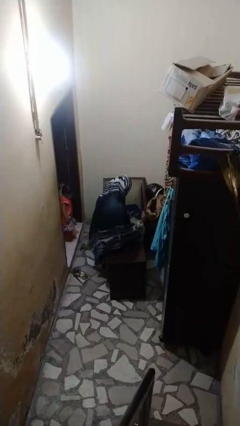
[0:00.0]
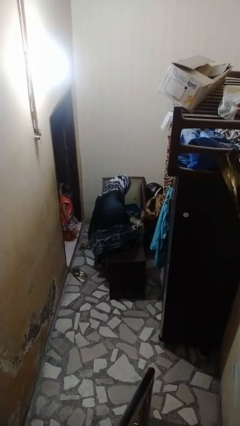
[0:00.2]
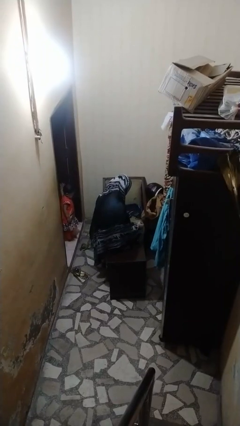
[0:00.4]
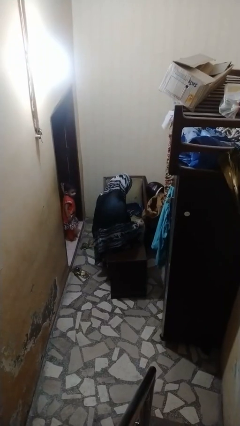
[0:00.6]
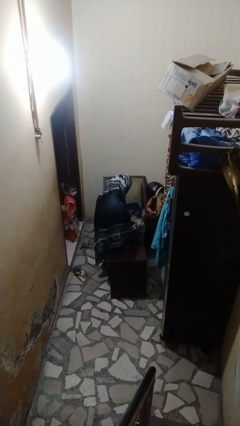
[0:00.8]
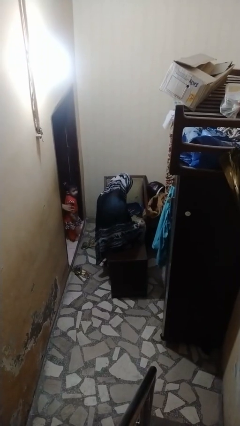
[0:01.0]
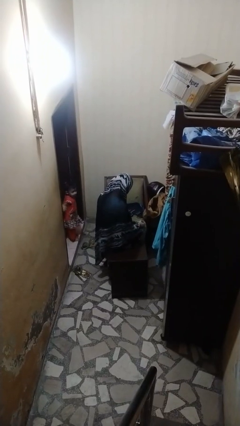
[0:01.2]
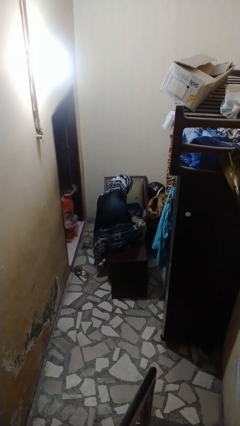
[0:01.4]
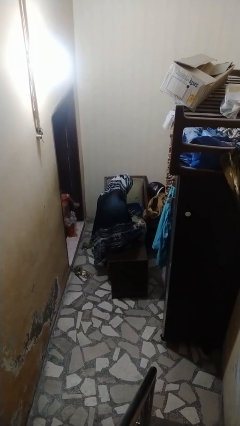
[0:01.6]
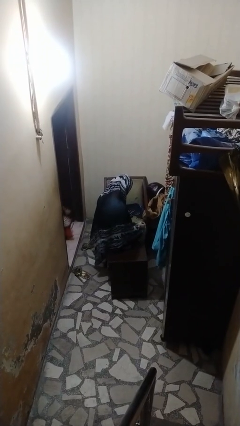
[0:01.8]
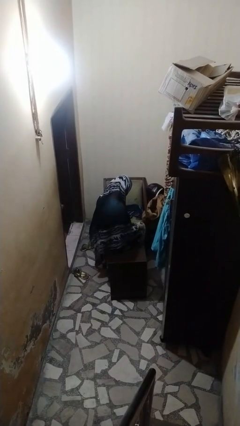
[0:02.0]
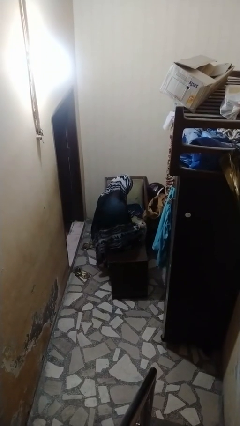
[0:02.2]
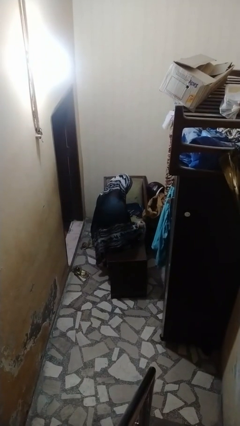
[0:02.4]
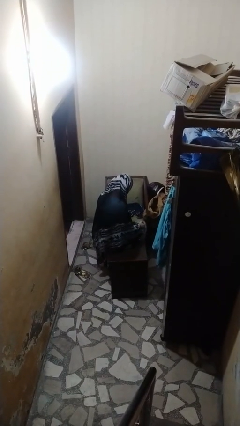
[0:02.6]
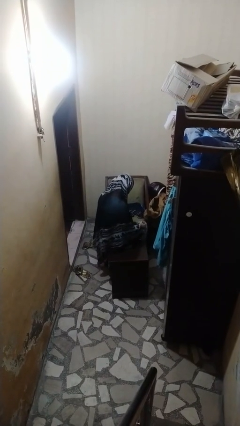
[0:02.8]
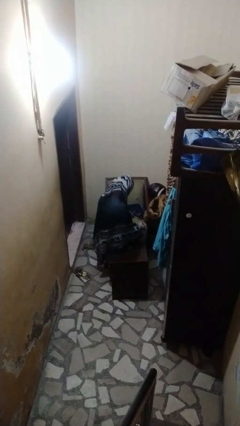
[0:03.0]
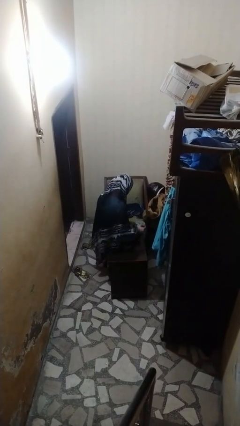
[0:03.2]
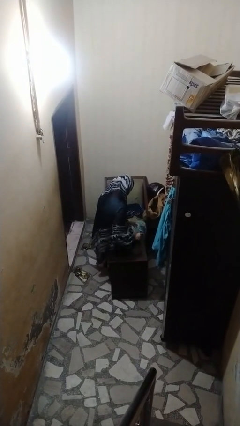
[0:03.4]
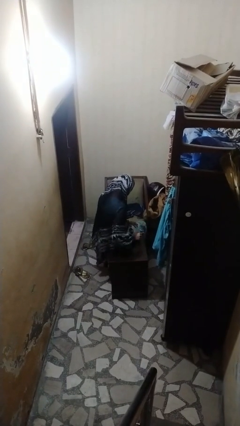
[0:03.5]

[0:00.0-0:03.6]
person paints fingernails

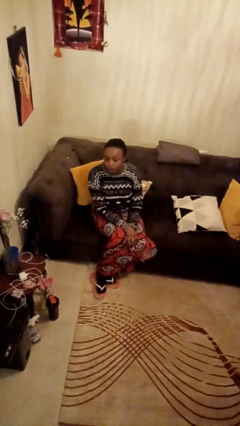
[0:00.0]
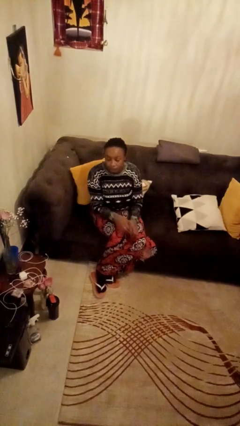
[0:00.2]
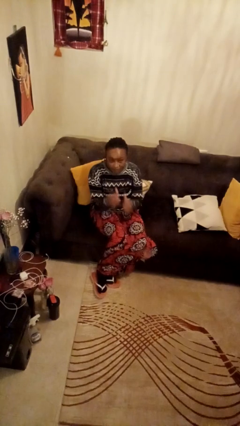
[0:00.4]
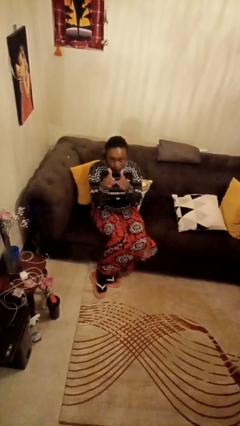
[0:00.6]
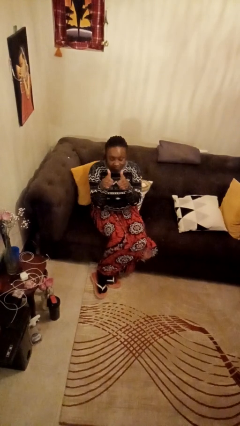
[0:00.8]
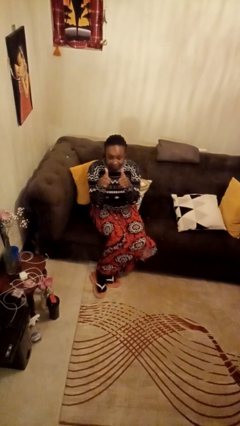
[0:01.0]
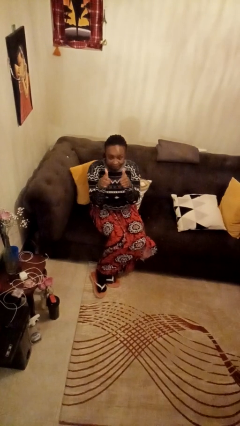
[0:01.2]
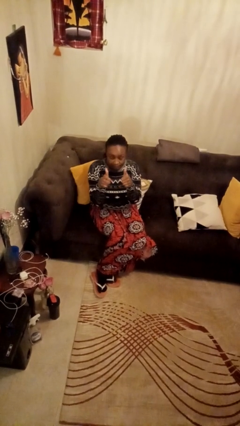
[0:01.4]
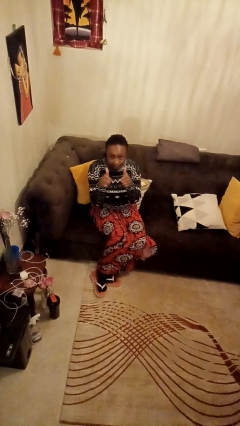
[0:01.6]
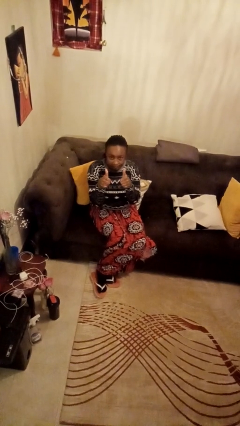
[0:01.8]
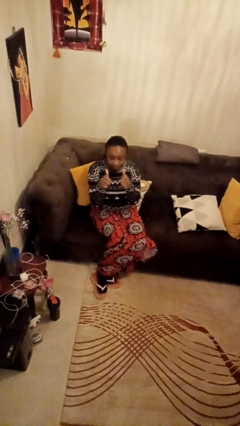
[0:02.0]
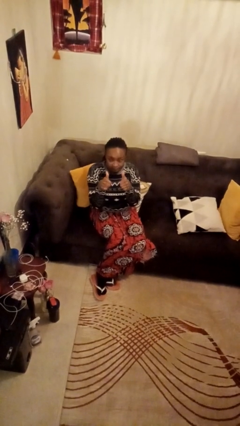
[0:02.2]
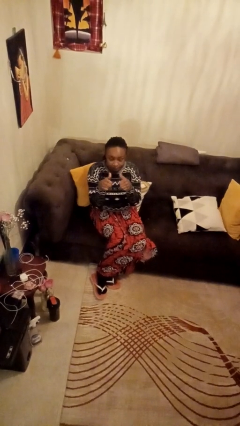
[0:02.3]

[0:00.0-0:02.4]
person gestures thumbs up

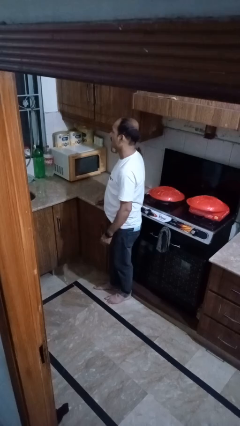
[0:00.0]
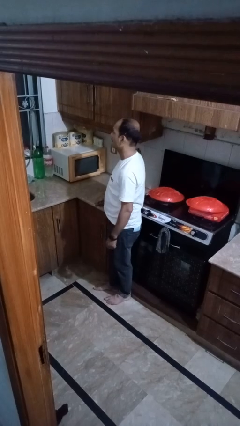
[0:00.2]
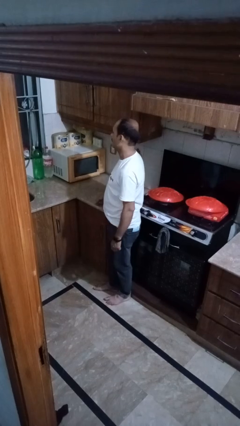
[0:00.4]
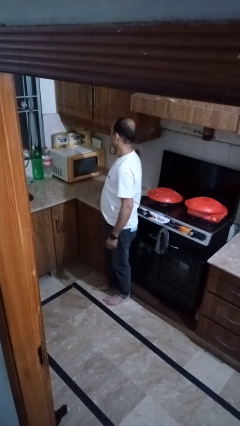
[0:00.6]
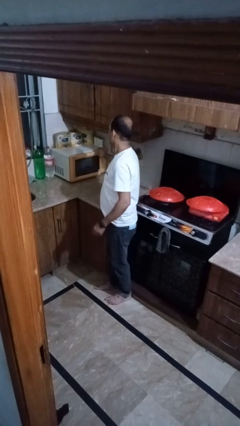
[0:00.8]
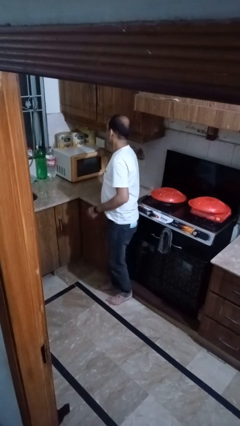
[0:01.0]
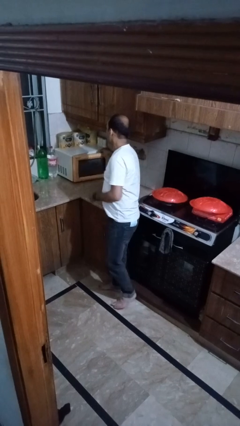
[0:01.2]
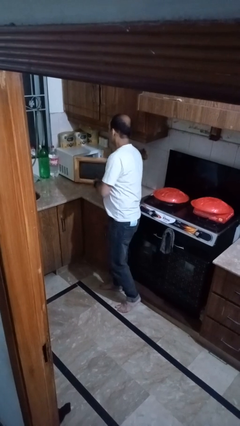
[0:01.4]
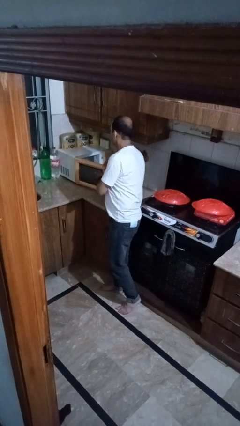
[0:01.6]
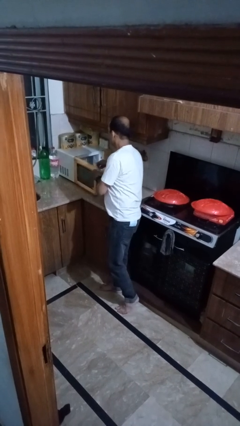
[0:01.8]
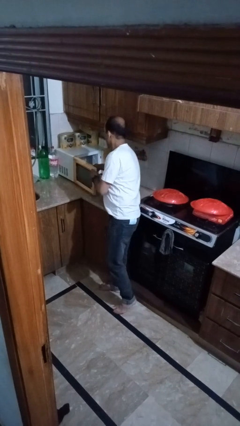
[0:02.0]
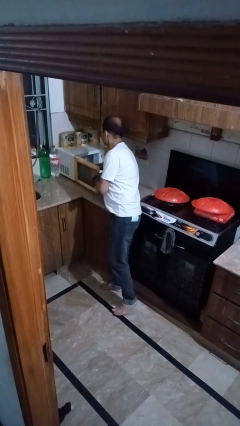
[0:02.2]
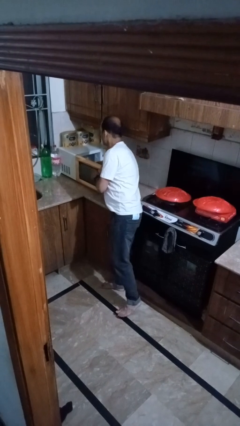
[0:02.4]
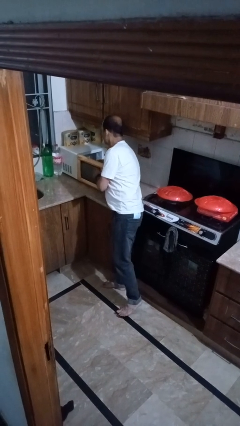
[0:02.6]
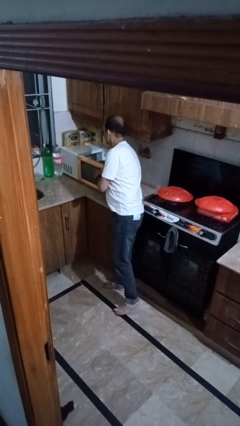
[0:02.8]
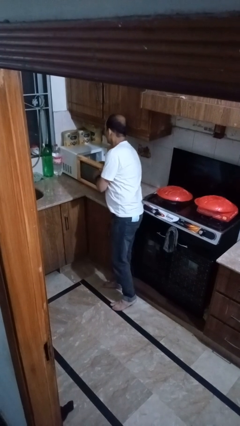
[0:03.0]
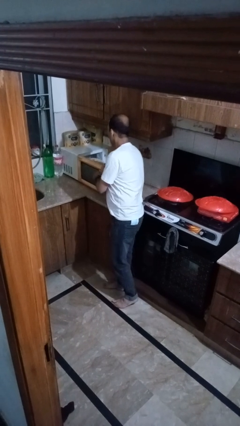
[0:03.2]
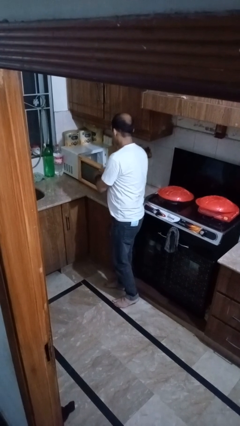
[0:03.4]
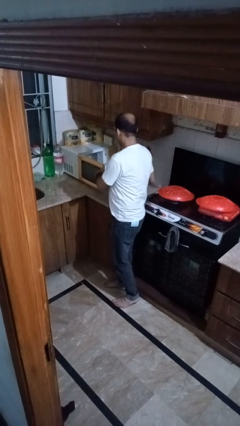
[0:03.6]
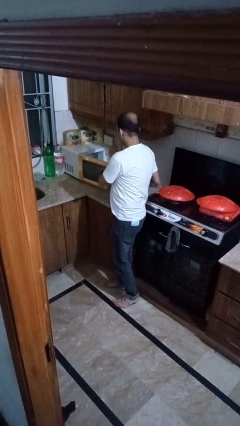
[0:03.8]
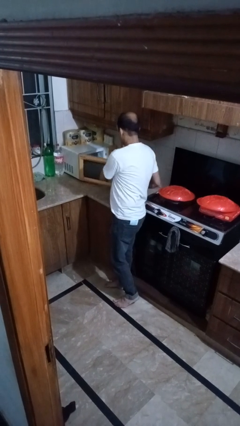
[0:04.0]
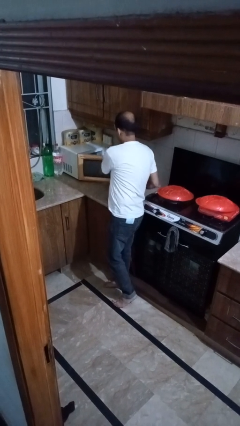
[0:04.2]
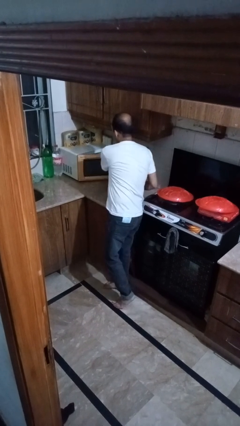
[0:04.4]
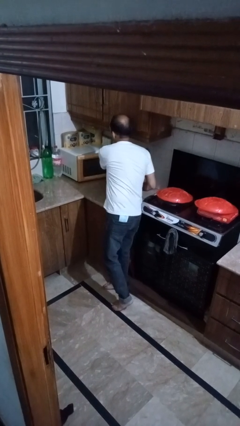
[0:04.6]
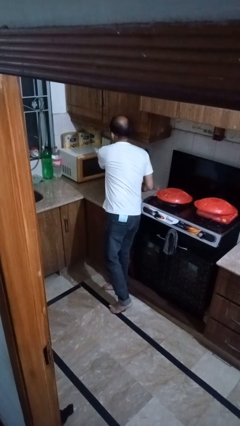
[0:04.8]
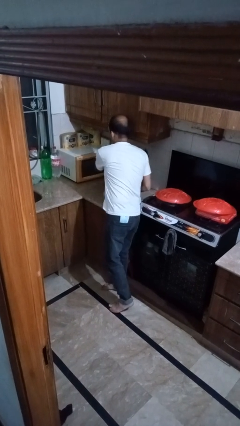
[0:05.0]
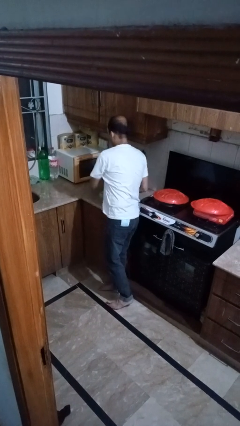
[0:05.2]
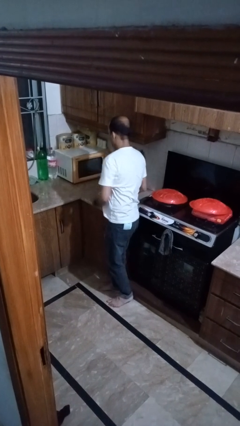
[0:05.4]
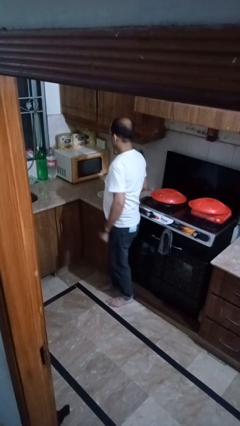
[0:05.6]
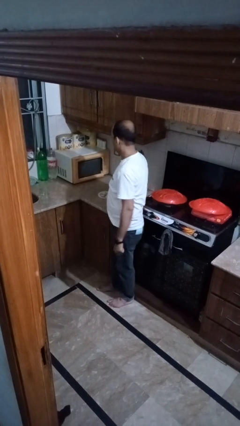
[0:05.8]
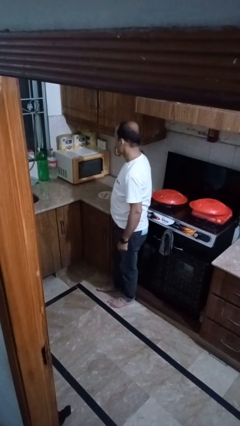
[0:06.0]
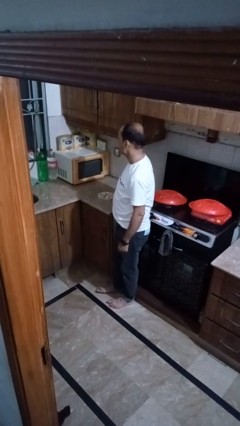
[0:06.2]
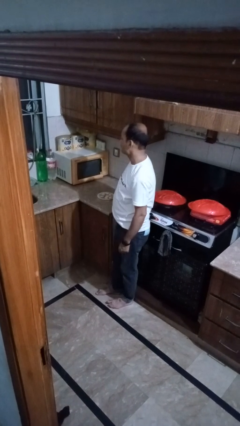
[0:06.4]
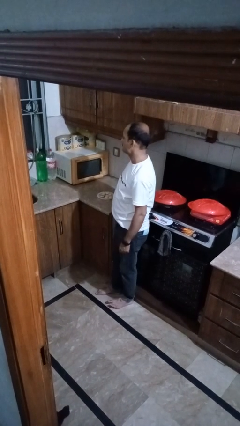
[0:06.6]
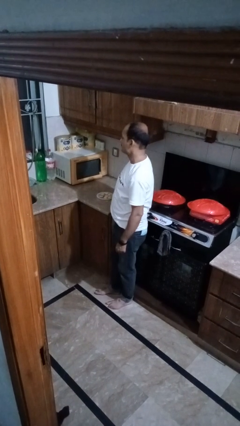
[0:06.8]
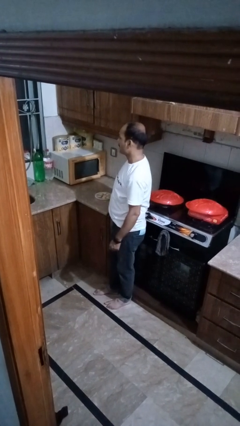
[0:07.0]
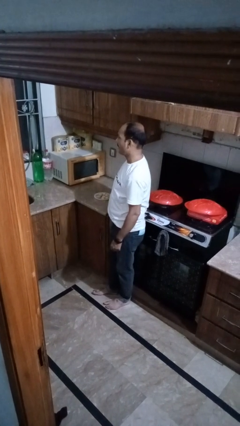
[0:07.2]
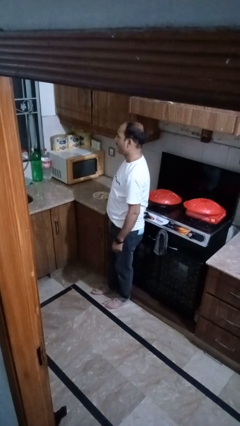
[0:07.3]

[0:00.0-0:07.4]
person takes object from microwave

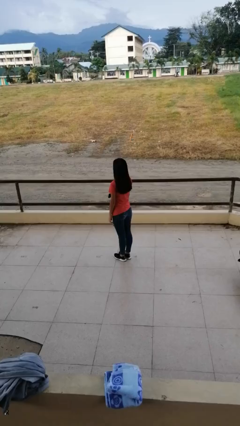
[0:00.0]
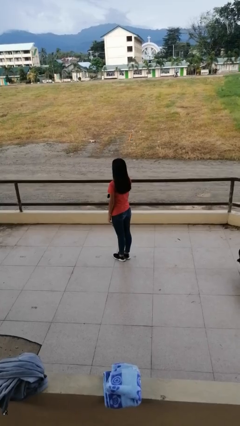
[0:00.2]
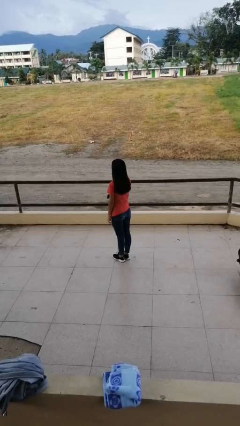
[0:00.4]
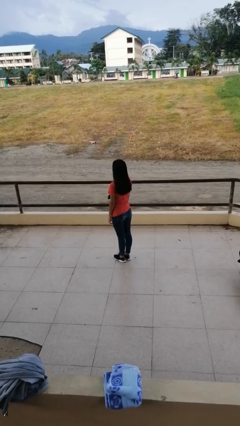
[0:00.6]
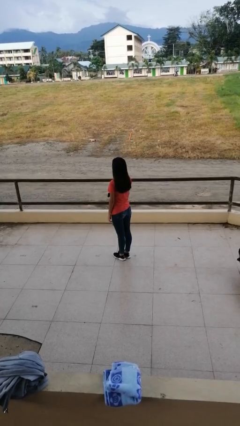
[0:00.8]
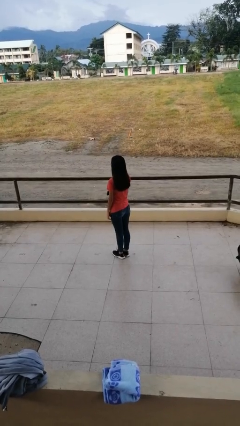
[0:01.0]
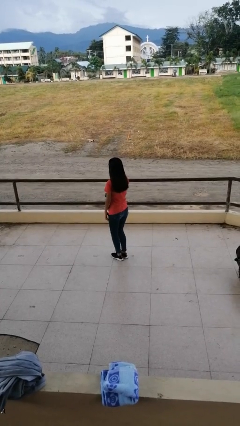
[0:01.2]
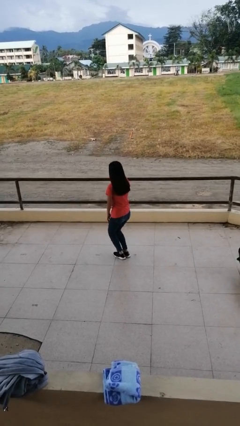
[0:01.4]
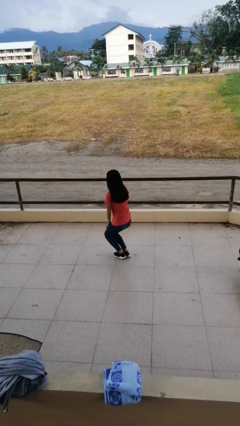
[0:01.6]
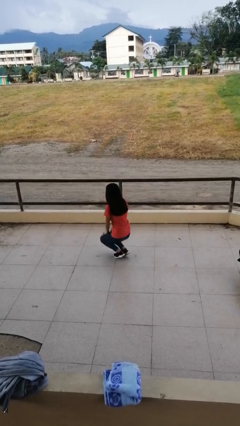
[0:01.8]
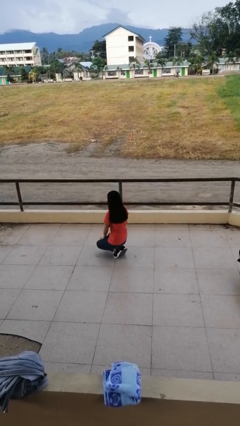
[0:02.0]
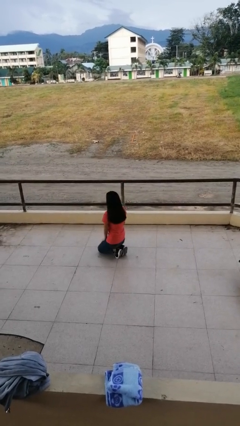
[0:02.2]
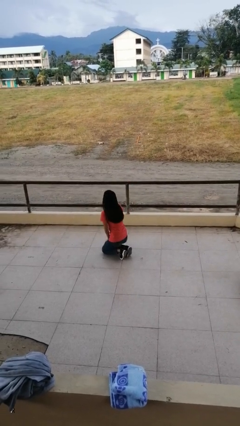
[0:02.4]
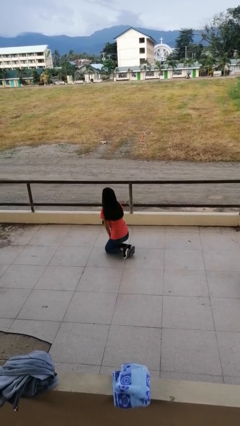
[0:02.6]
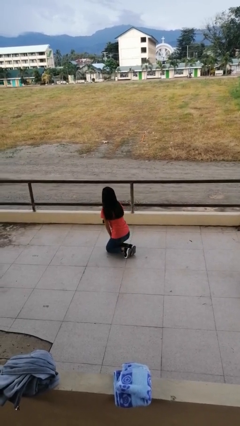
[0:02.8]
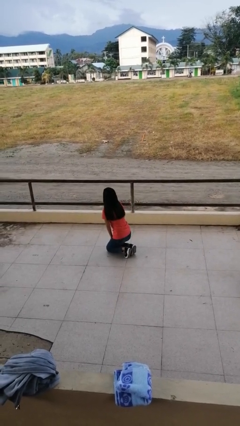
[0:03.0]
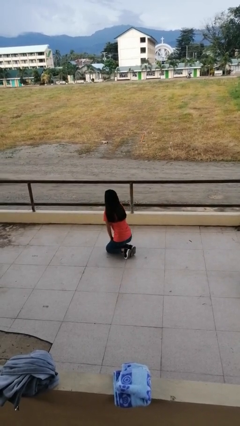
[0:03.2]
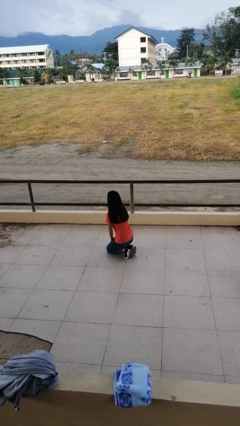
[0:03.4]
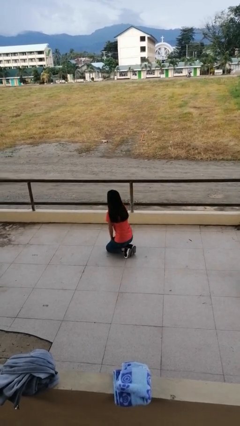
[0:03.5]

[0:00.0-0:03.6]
person kneels

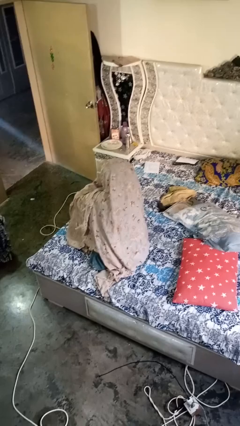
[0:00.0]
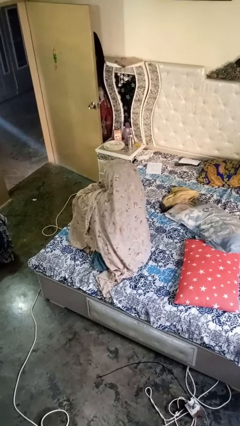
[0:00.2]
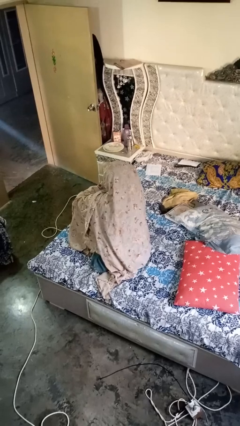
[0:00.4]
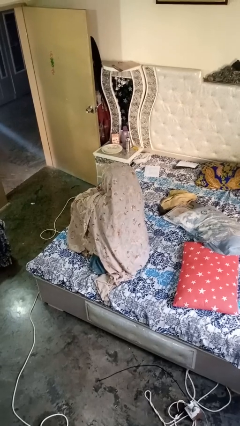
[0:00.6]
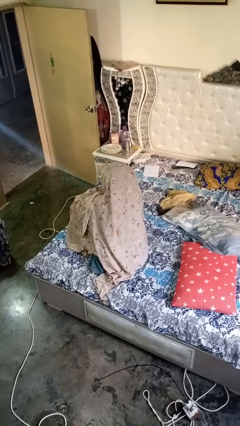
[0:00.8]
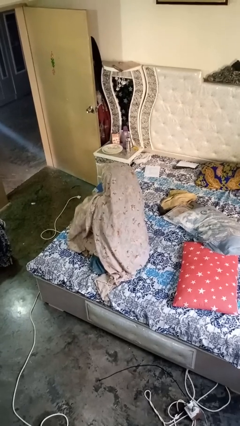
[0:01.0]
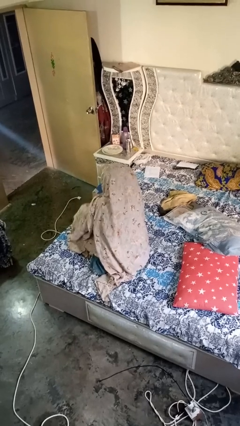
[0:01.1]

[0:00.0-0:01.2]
person looks at wristwatch
